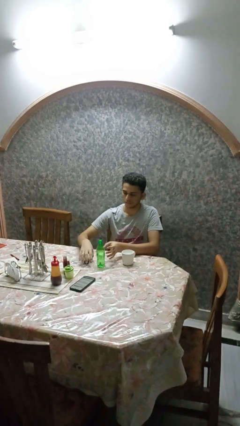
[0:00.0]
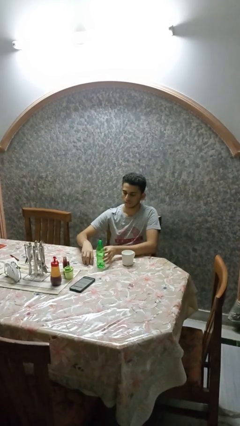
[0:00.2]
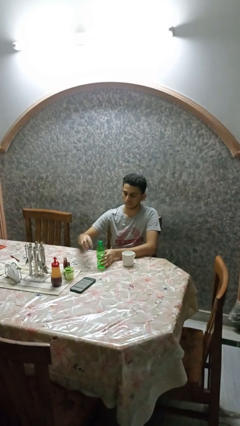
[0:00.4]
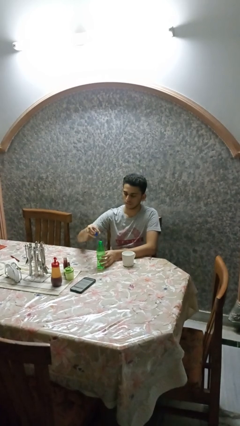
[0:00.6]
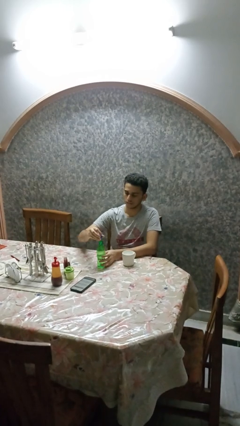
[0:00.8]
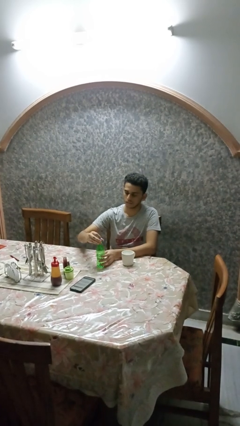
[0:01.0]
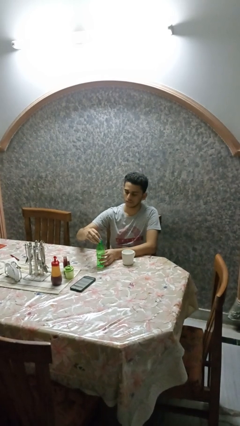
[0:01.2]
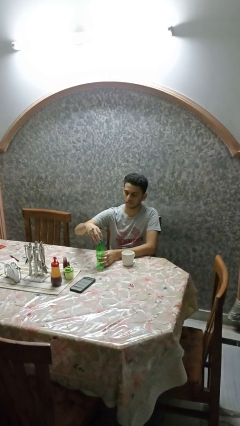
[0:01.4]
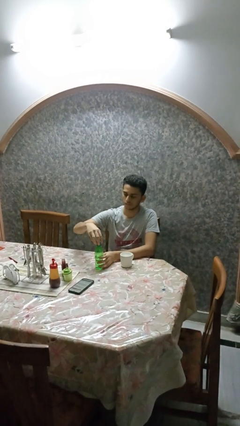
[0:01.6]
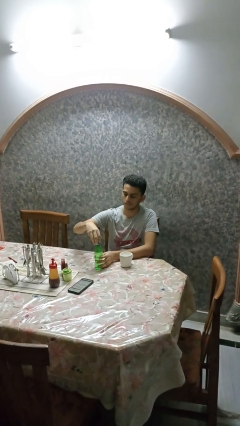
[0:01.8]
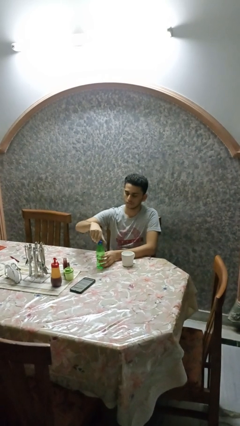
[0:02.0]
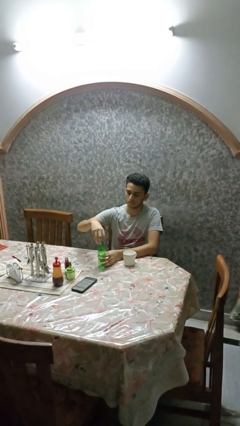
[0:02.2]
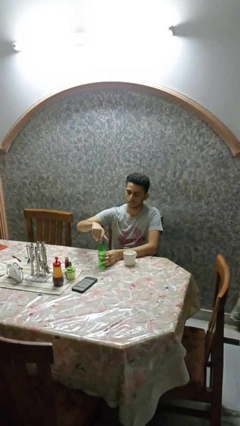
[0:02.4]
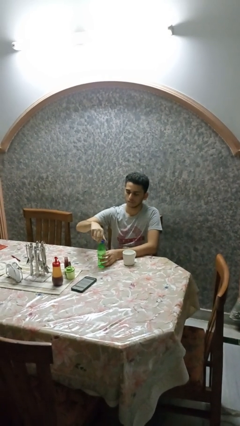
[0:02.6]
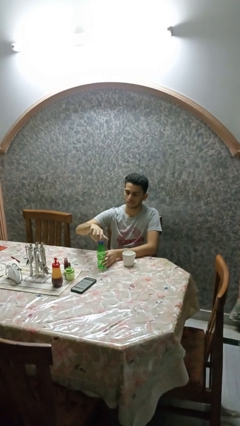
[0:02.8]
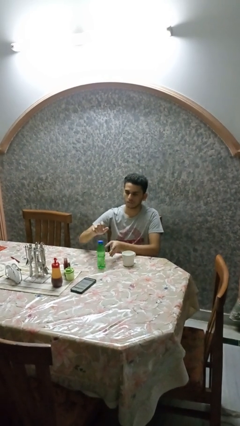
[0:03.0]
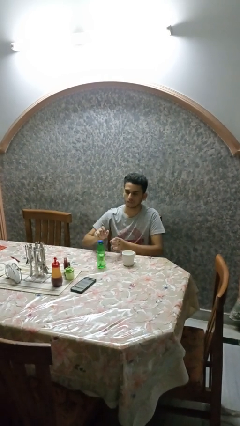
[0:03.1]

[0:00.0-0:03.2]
person screws lid to bottle

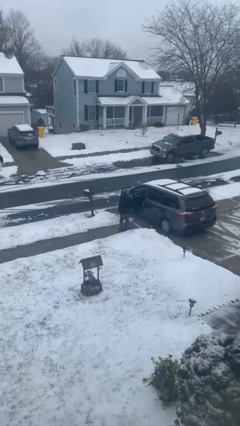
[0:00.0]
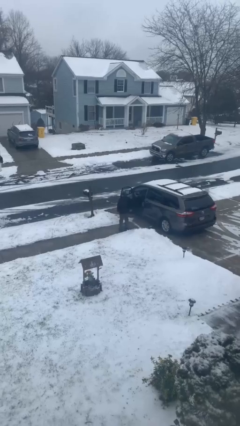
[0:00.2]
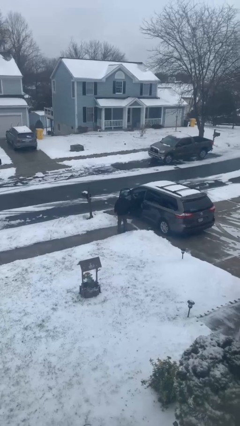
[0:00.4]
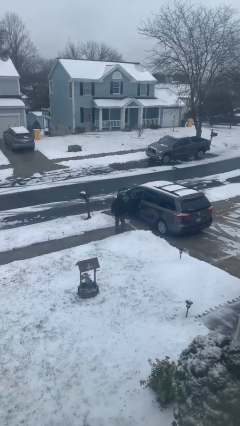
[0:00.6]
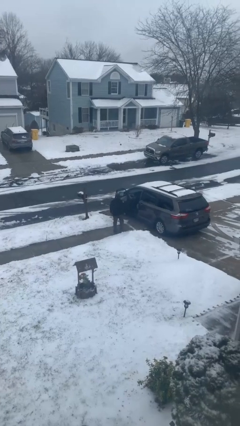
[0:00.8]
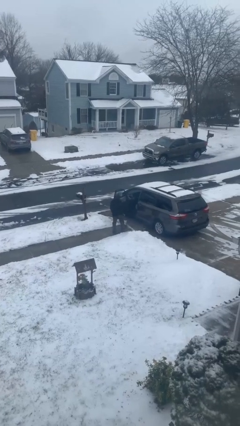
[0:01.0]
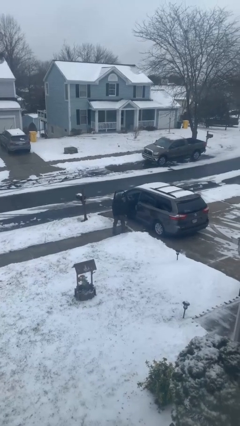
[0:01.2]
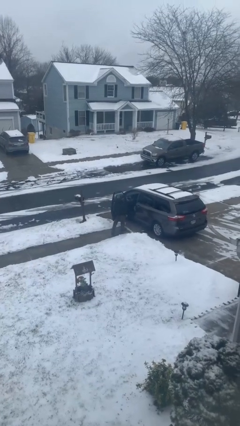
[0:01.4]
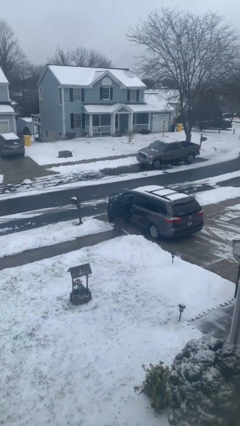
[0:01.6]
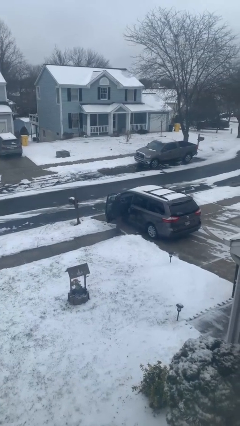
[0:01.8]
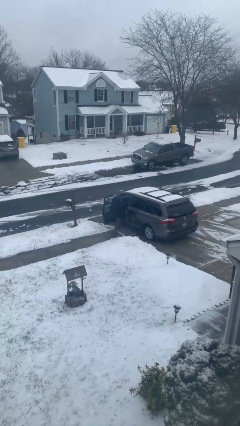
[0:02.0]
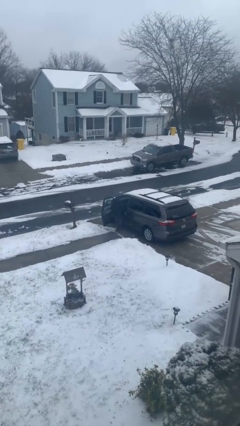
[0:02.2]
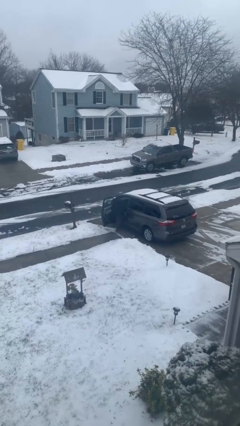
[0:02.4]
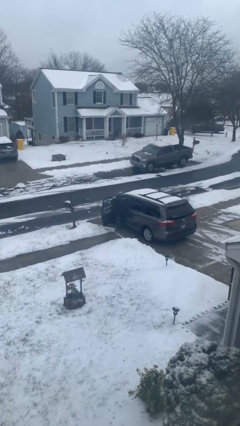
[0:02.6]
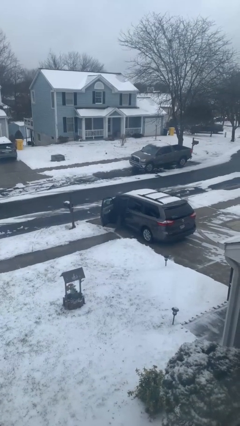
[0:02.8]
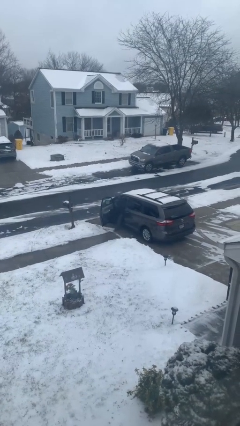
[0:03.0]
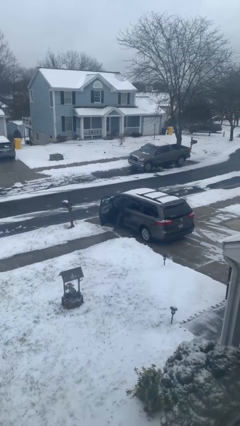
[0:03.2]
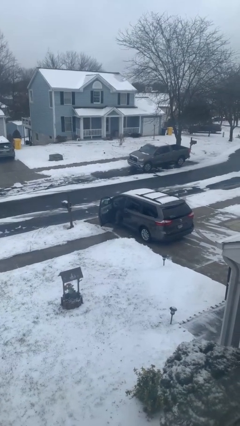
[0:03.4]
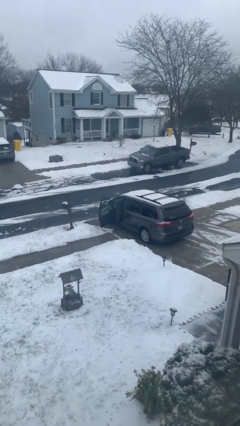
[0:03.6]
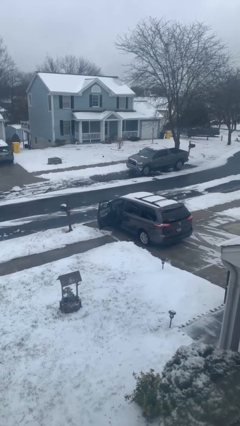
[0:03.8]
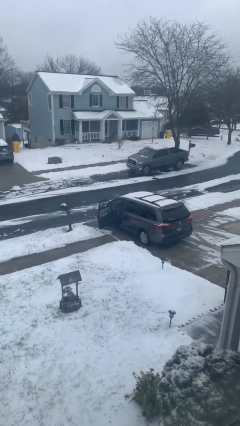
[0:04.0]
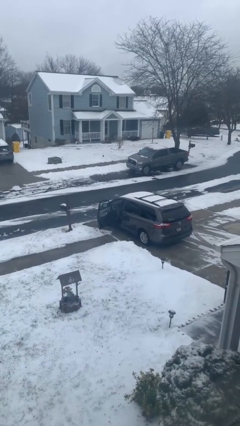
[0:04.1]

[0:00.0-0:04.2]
person enters car

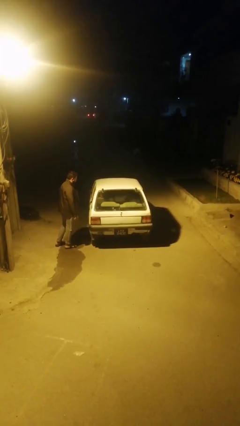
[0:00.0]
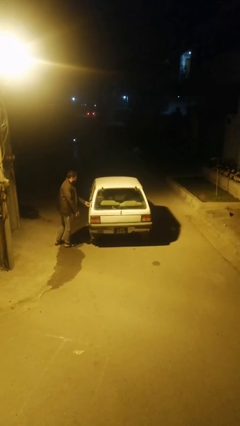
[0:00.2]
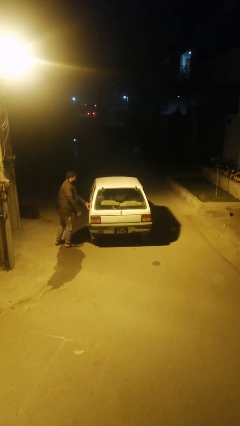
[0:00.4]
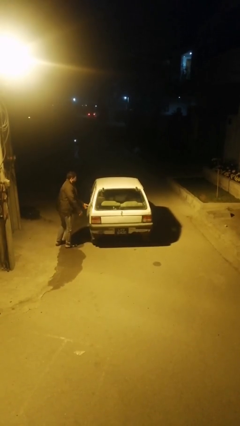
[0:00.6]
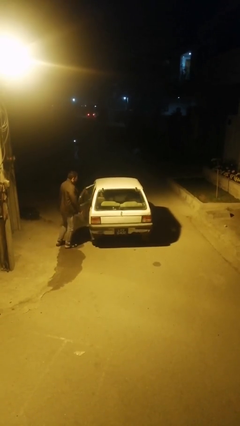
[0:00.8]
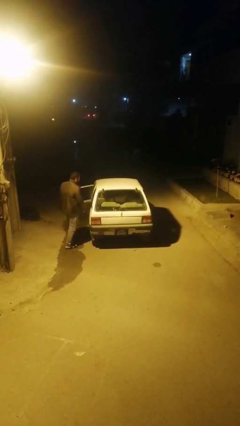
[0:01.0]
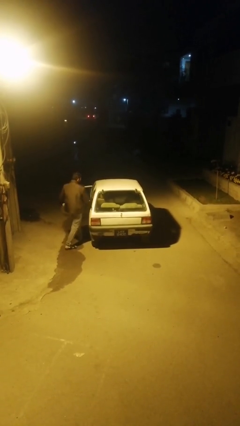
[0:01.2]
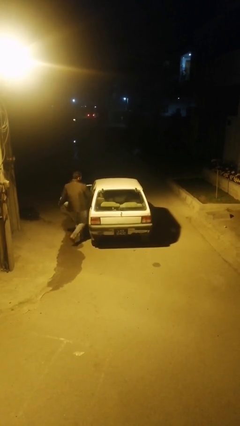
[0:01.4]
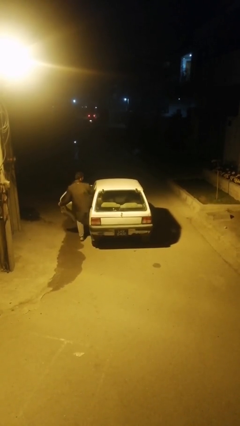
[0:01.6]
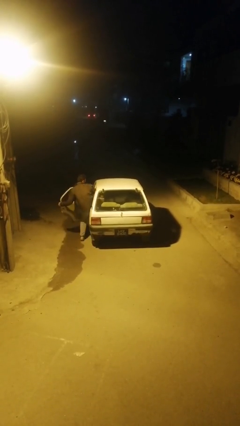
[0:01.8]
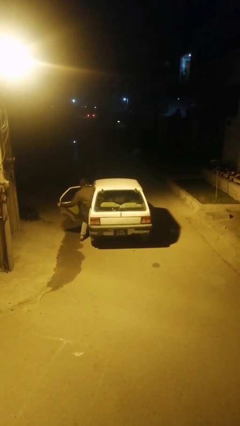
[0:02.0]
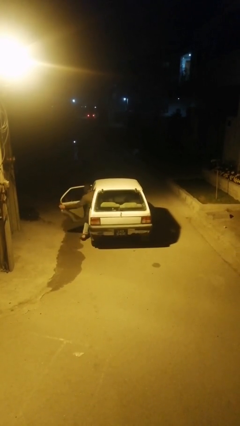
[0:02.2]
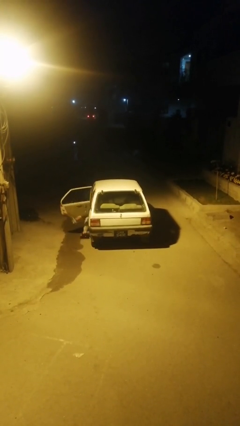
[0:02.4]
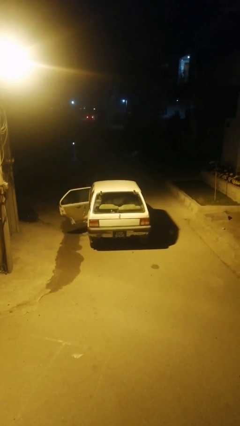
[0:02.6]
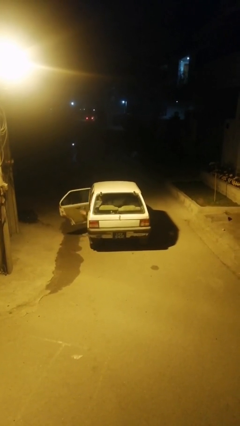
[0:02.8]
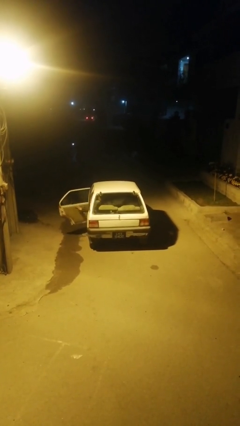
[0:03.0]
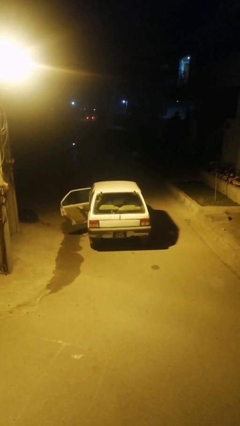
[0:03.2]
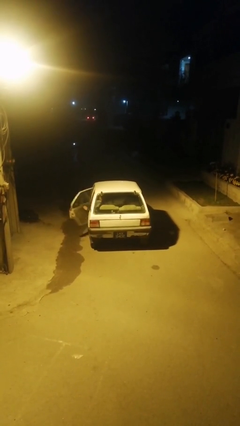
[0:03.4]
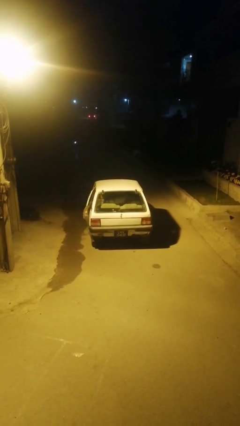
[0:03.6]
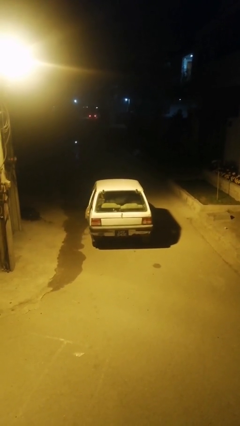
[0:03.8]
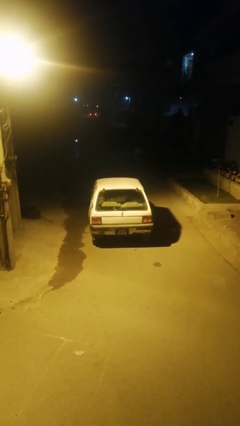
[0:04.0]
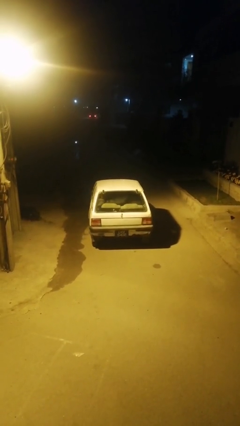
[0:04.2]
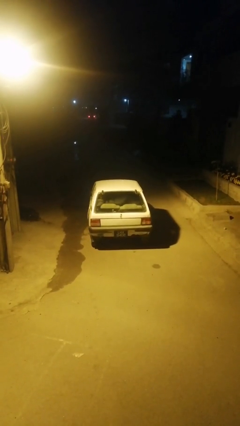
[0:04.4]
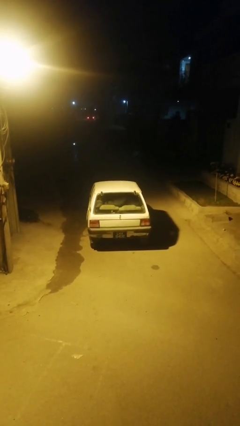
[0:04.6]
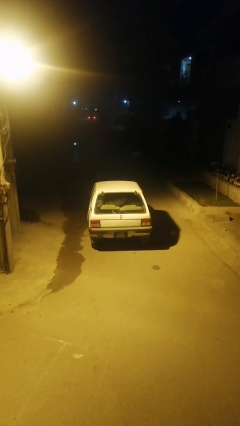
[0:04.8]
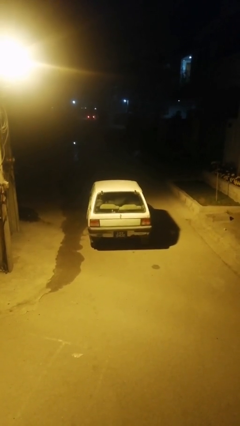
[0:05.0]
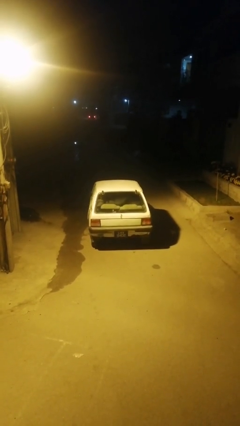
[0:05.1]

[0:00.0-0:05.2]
car picks up person

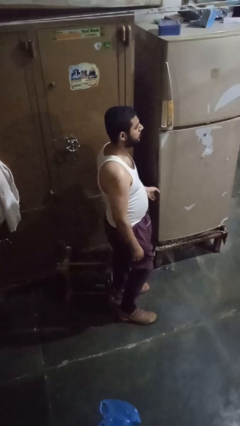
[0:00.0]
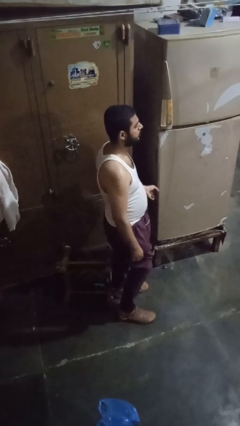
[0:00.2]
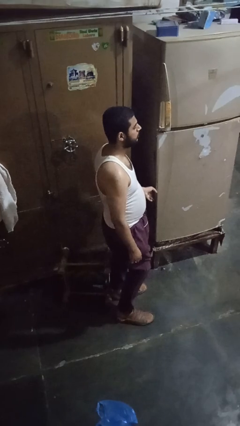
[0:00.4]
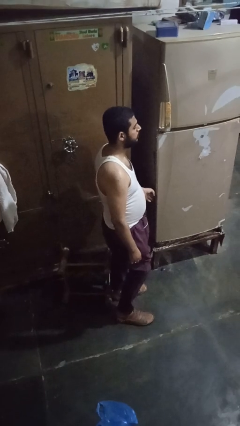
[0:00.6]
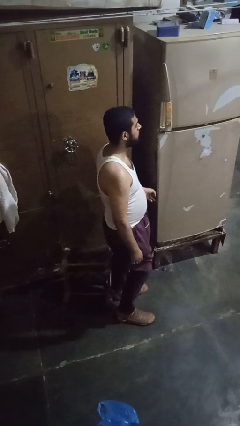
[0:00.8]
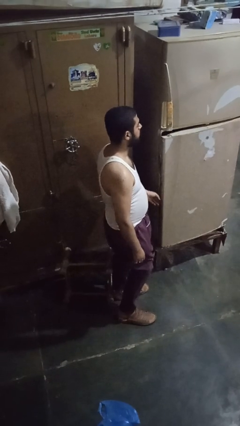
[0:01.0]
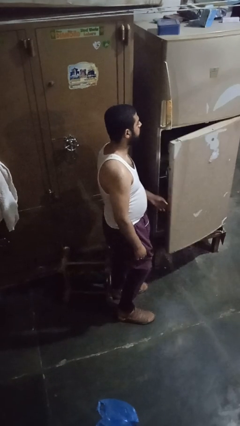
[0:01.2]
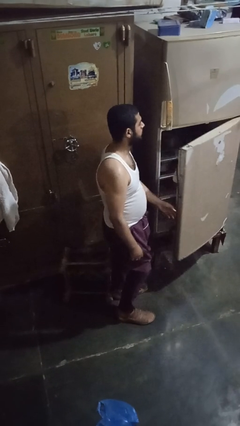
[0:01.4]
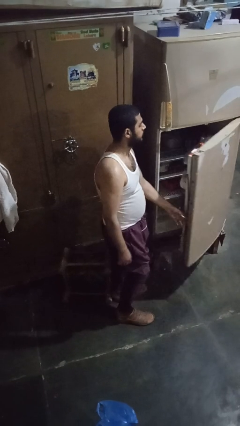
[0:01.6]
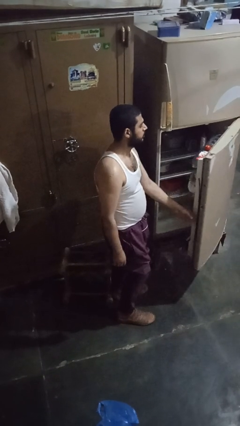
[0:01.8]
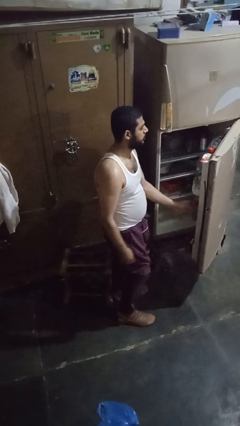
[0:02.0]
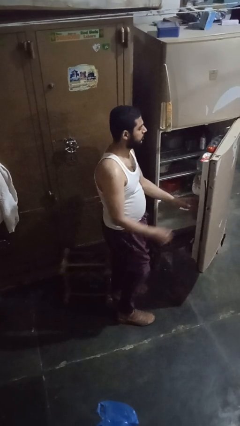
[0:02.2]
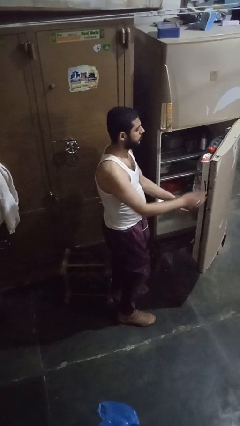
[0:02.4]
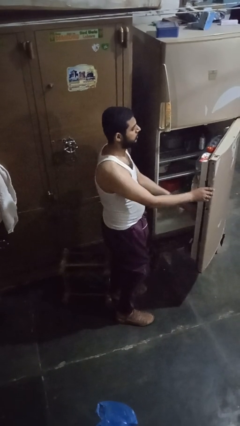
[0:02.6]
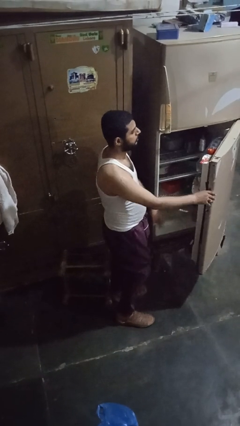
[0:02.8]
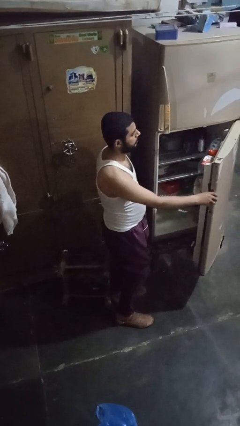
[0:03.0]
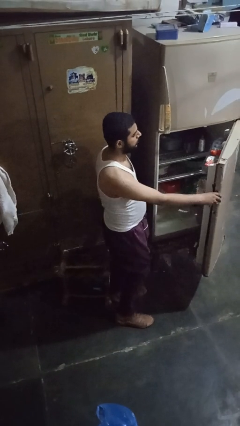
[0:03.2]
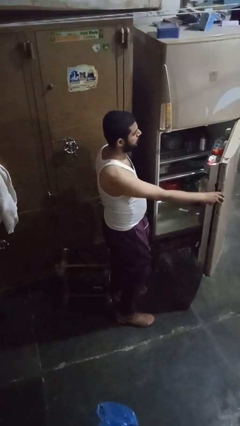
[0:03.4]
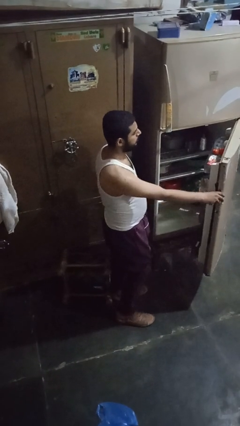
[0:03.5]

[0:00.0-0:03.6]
person opens refrigerator

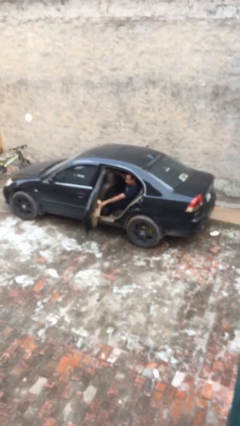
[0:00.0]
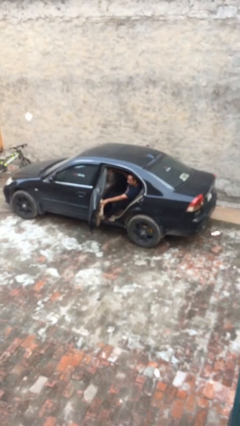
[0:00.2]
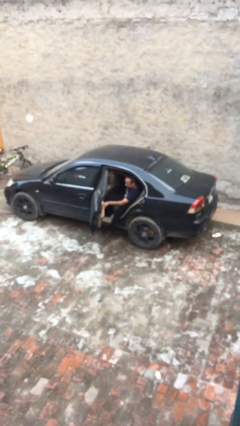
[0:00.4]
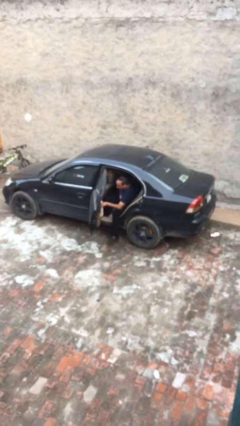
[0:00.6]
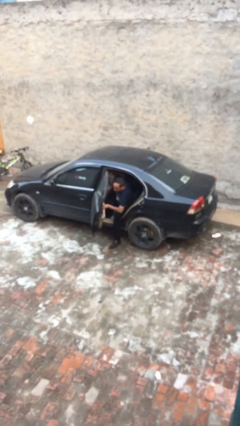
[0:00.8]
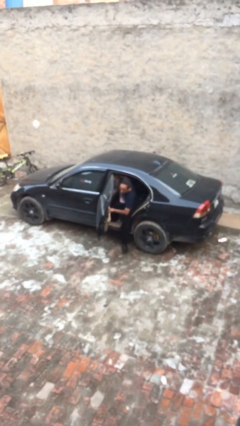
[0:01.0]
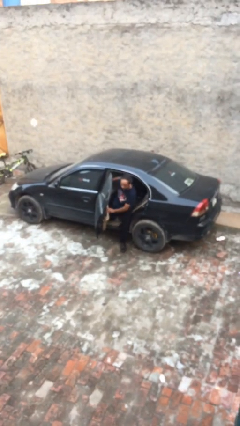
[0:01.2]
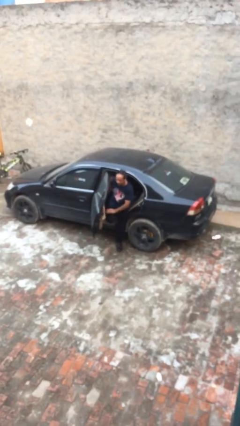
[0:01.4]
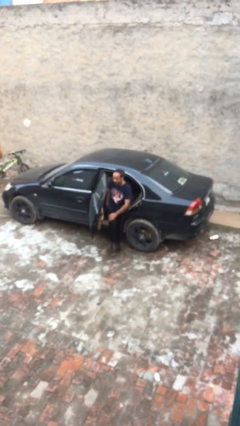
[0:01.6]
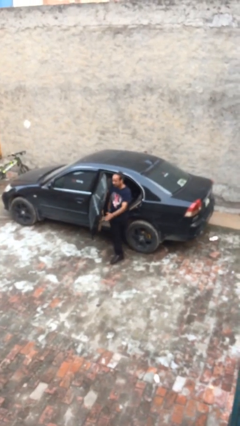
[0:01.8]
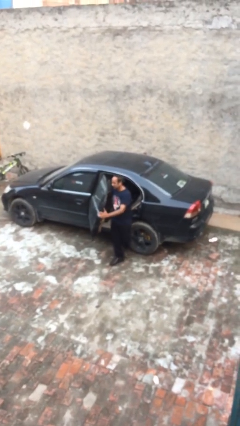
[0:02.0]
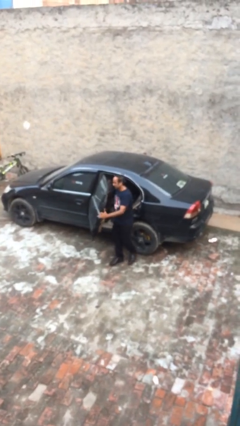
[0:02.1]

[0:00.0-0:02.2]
person exits car
